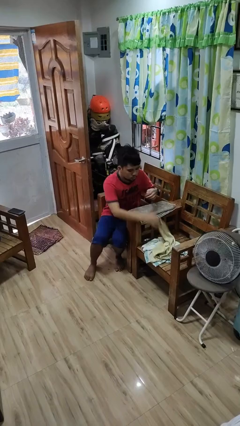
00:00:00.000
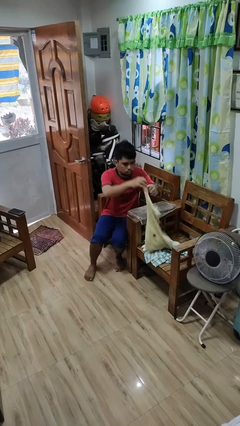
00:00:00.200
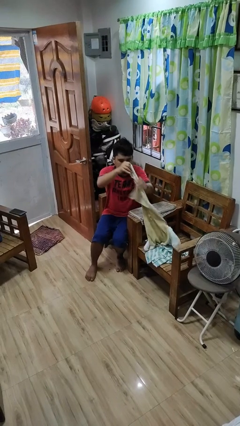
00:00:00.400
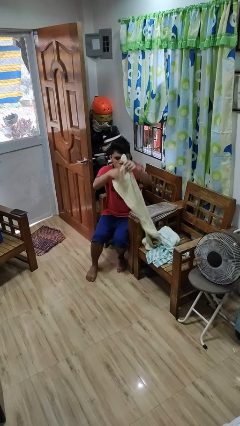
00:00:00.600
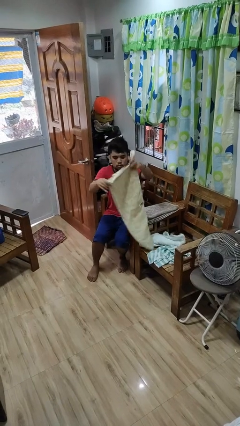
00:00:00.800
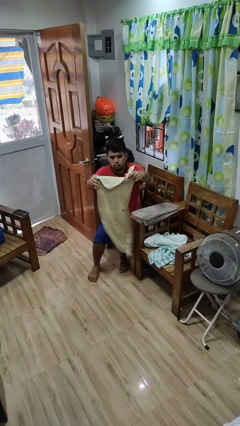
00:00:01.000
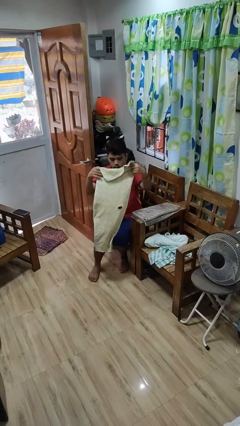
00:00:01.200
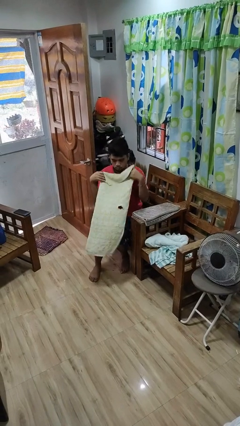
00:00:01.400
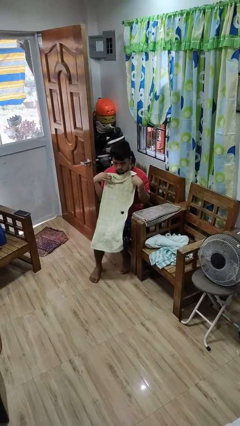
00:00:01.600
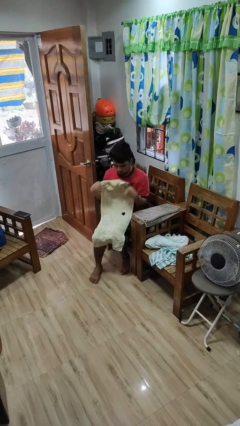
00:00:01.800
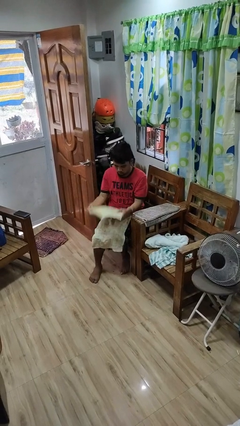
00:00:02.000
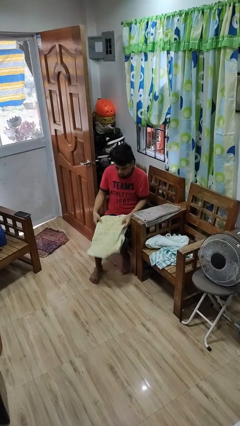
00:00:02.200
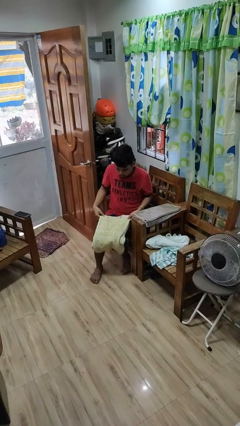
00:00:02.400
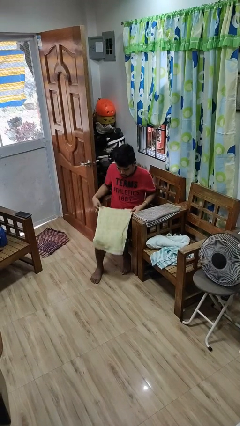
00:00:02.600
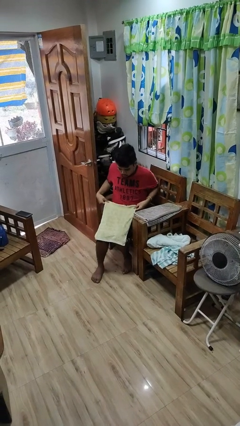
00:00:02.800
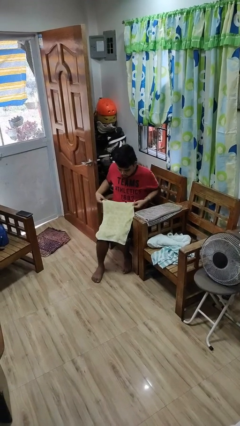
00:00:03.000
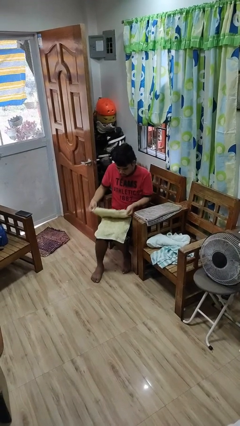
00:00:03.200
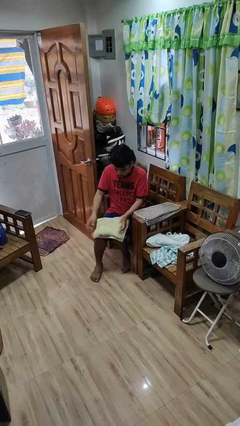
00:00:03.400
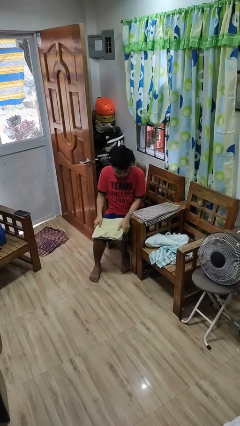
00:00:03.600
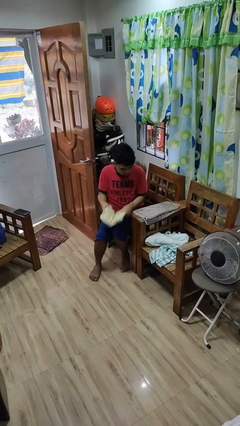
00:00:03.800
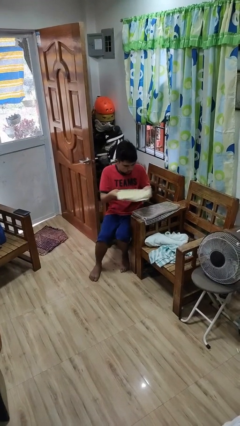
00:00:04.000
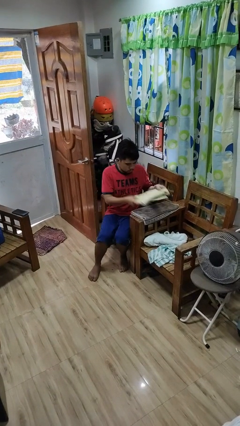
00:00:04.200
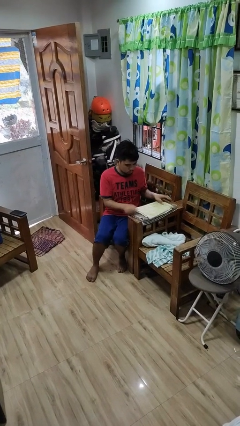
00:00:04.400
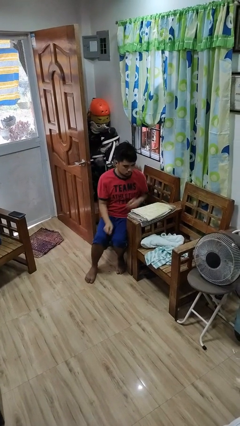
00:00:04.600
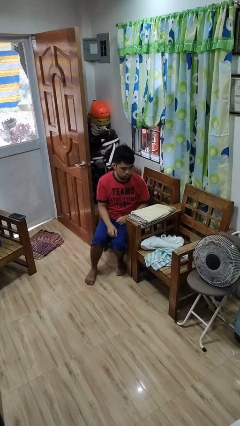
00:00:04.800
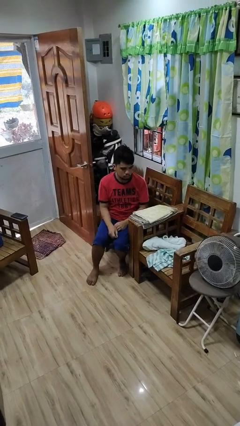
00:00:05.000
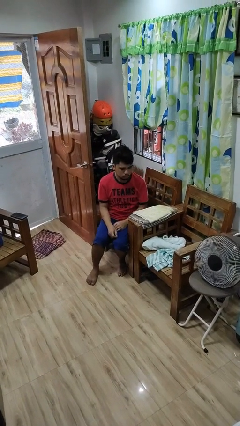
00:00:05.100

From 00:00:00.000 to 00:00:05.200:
person folds towel

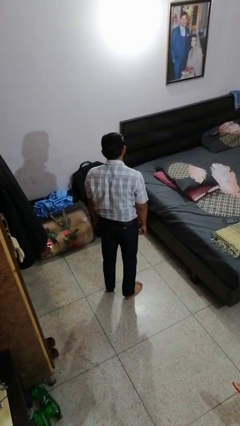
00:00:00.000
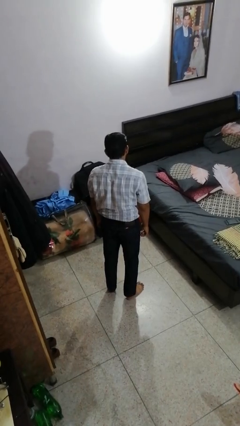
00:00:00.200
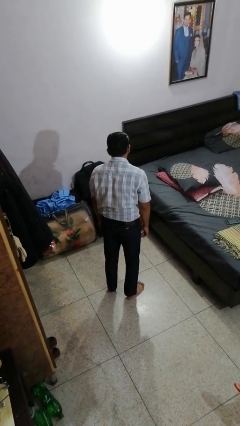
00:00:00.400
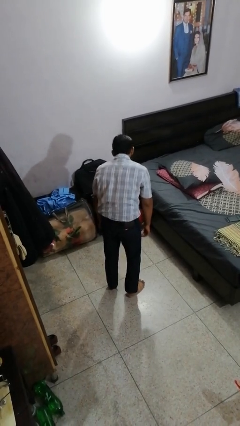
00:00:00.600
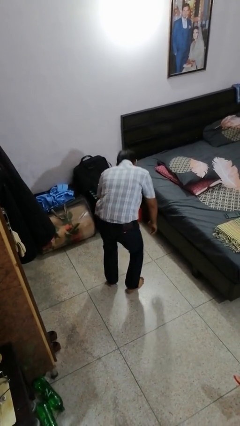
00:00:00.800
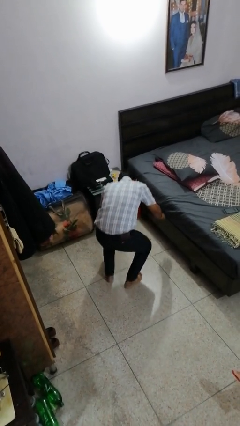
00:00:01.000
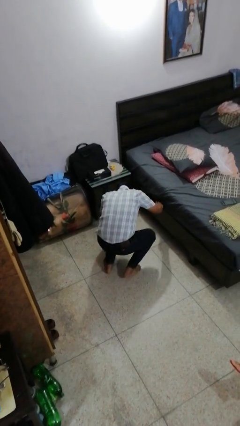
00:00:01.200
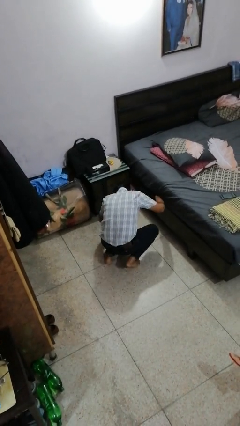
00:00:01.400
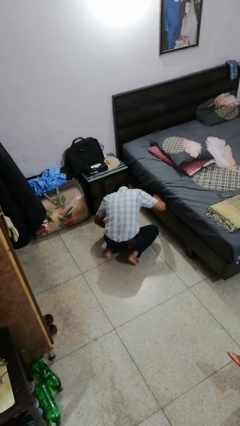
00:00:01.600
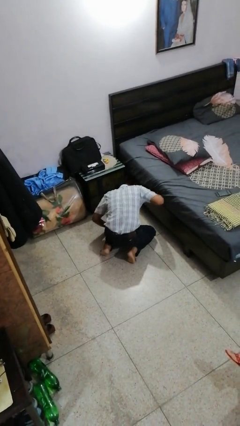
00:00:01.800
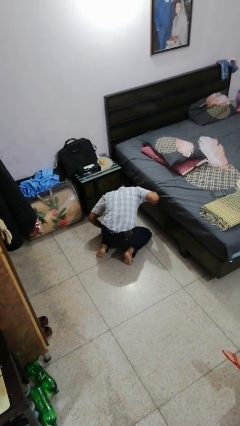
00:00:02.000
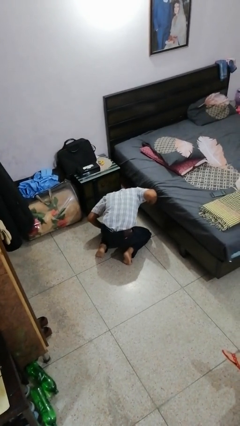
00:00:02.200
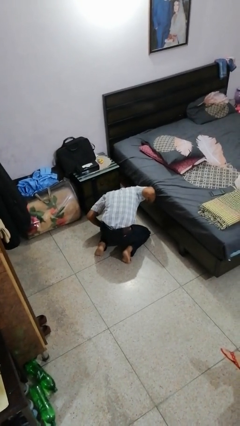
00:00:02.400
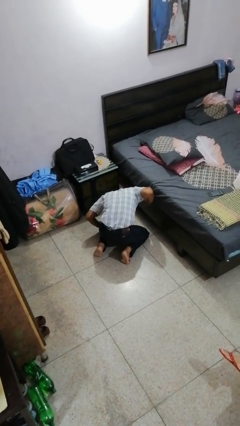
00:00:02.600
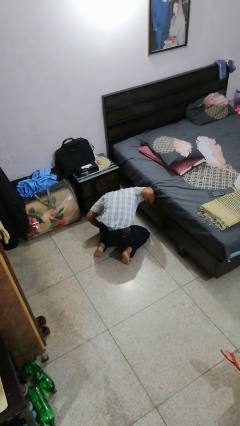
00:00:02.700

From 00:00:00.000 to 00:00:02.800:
person searches under bed

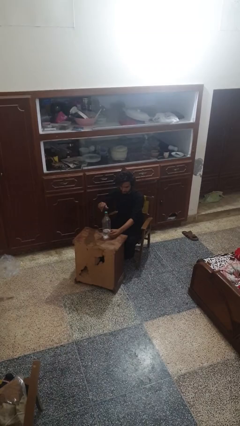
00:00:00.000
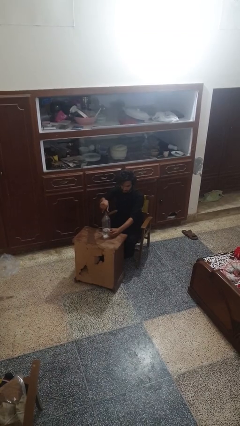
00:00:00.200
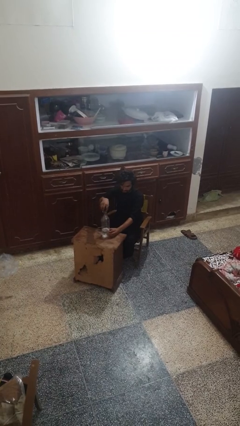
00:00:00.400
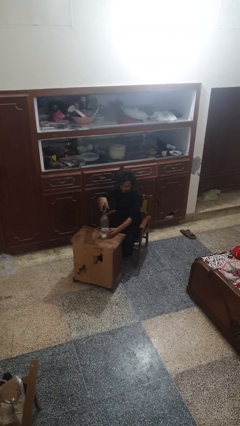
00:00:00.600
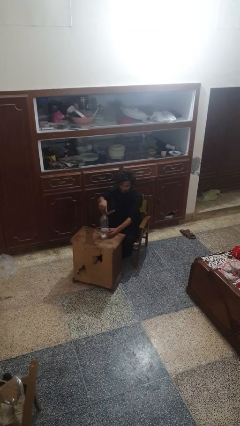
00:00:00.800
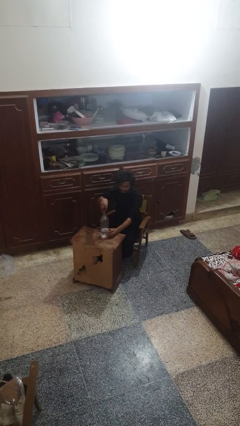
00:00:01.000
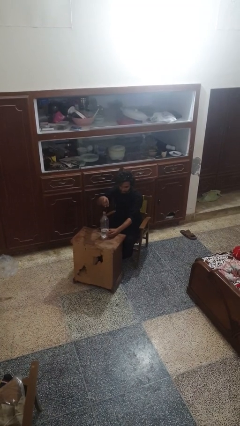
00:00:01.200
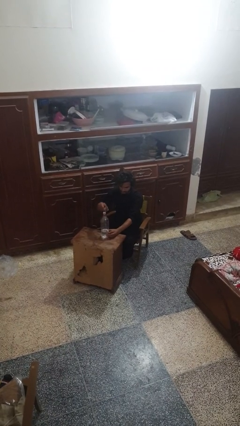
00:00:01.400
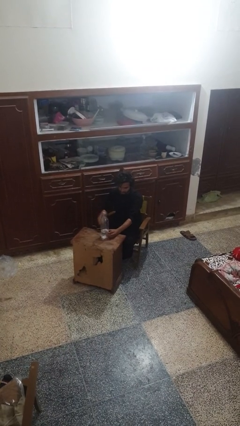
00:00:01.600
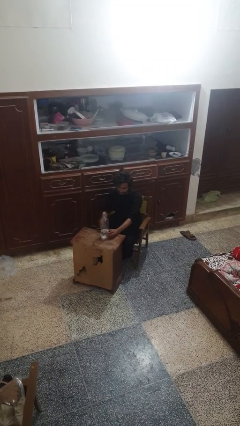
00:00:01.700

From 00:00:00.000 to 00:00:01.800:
person unscrews lid from bottle

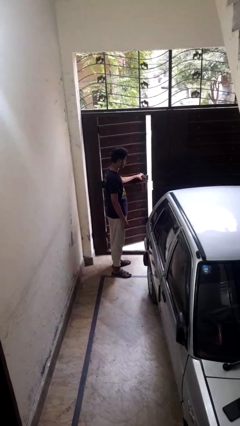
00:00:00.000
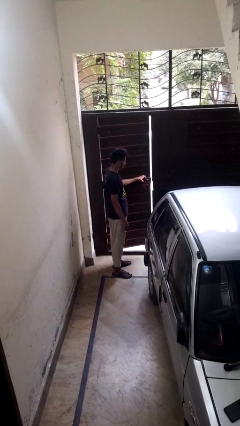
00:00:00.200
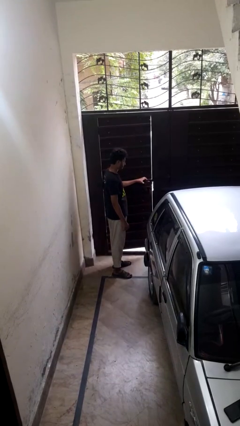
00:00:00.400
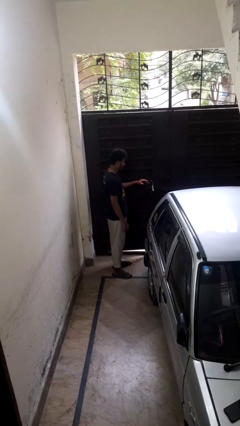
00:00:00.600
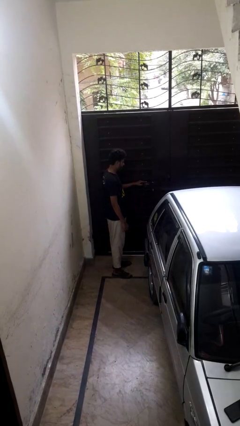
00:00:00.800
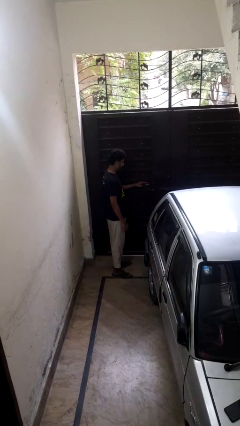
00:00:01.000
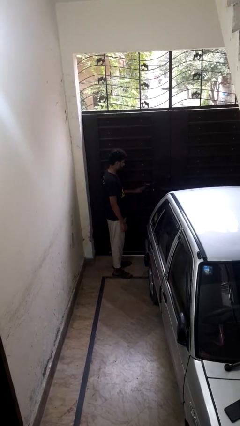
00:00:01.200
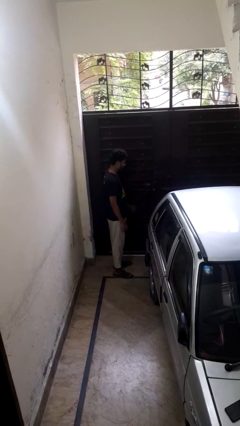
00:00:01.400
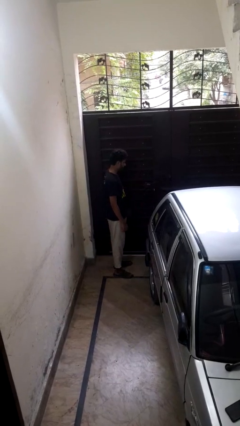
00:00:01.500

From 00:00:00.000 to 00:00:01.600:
person closes gate

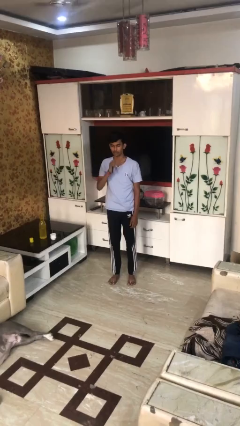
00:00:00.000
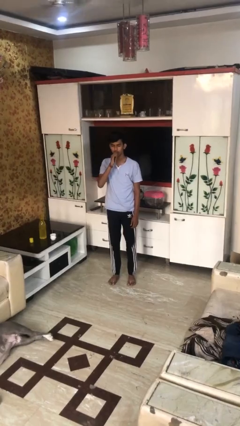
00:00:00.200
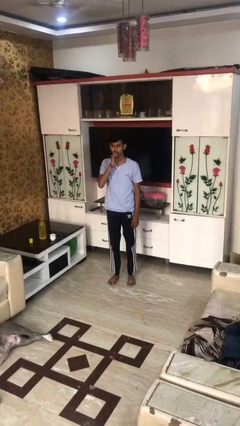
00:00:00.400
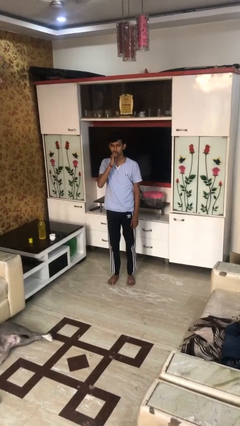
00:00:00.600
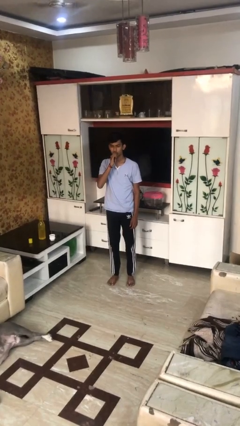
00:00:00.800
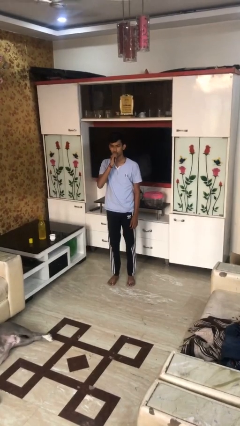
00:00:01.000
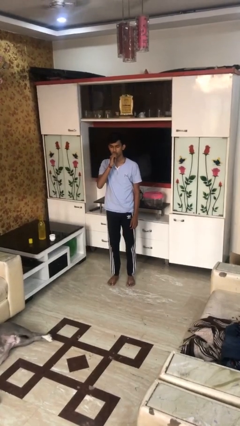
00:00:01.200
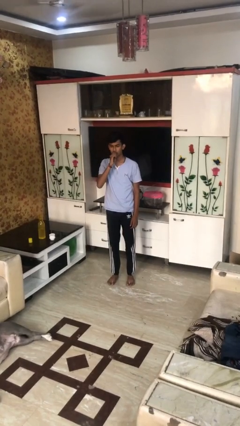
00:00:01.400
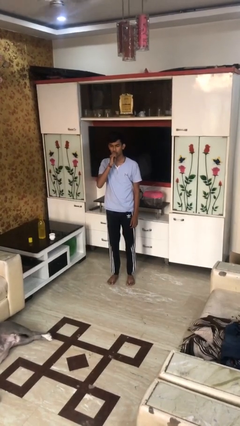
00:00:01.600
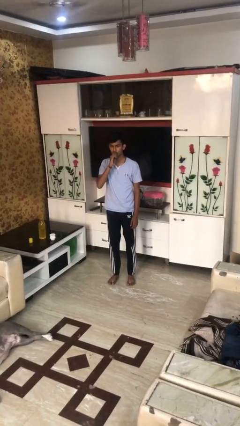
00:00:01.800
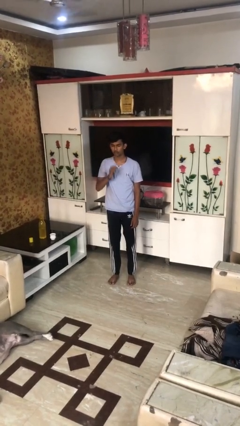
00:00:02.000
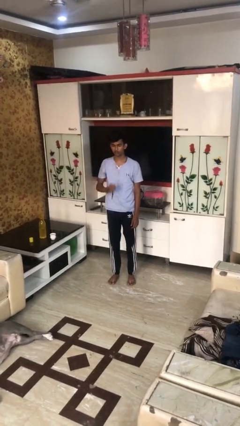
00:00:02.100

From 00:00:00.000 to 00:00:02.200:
person vapes

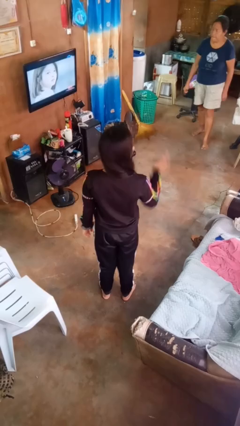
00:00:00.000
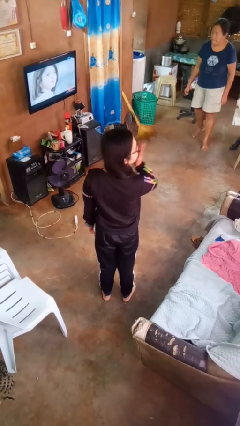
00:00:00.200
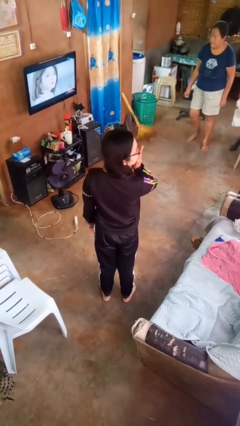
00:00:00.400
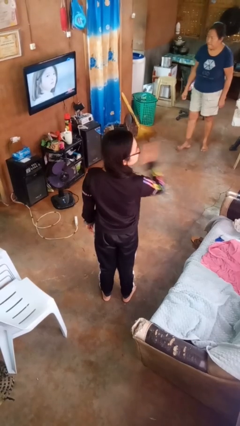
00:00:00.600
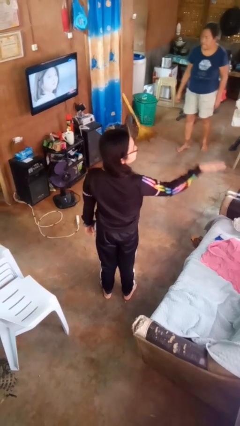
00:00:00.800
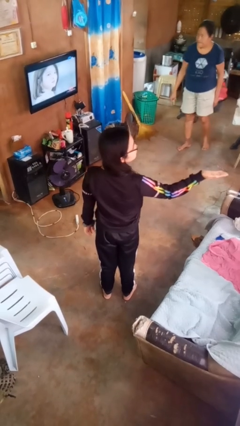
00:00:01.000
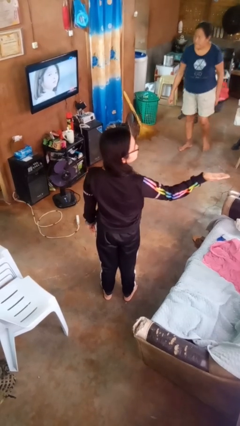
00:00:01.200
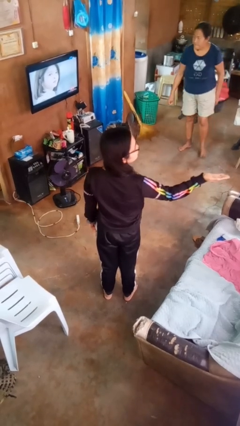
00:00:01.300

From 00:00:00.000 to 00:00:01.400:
person gestures blow kiss

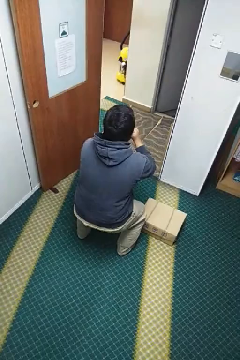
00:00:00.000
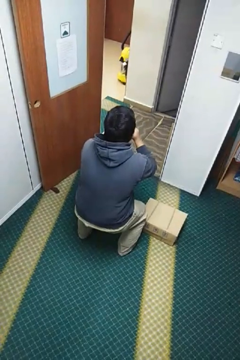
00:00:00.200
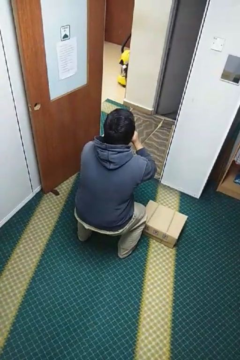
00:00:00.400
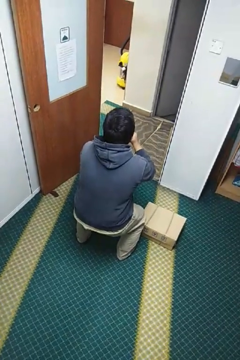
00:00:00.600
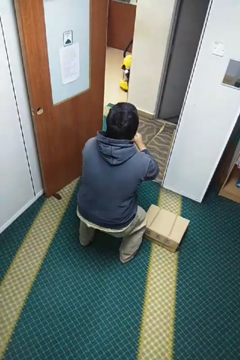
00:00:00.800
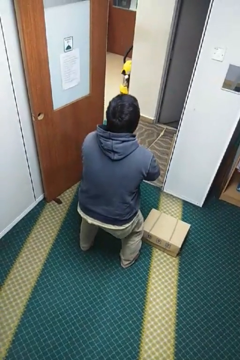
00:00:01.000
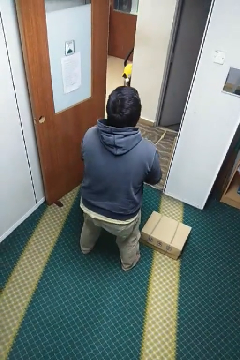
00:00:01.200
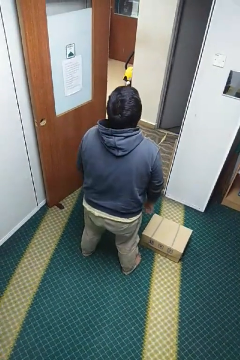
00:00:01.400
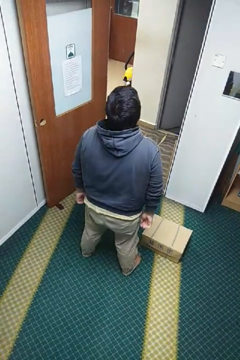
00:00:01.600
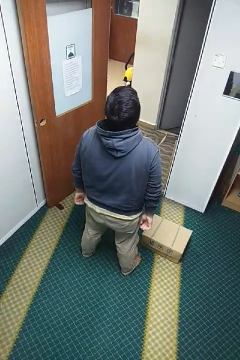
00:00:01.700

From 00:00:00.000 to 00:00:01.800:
person stands up

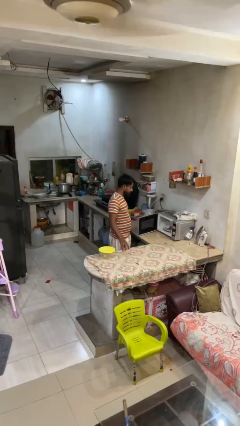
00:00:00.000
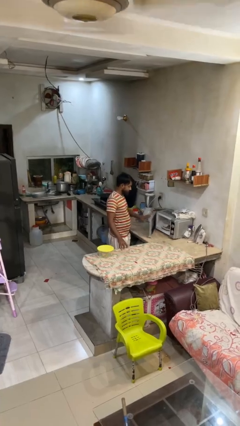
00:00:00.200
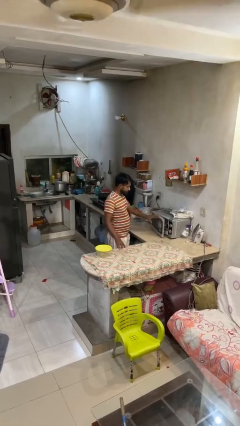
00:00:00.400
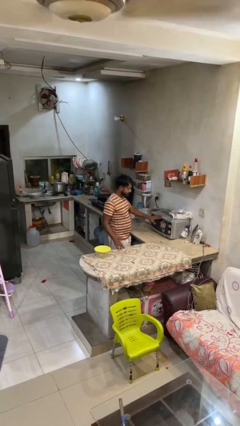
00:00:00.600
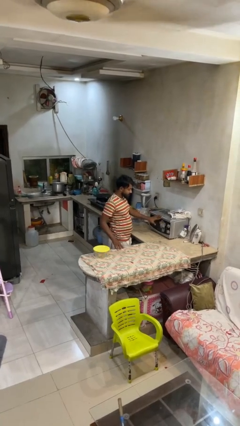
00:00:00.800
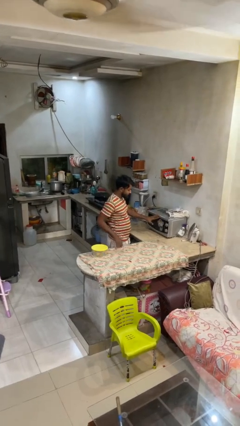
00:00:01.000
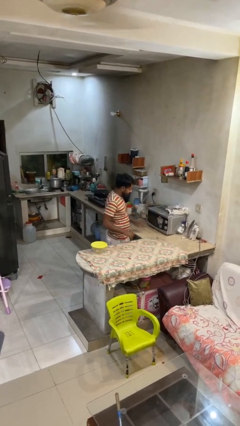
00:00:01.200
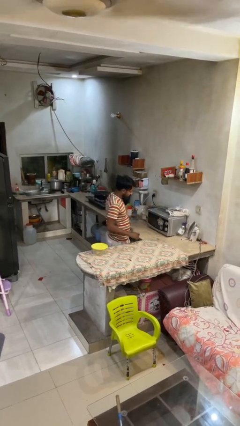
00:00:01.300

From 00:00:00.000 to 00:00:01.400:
person closes microwave
